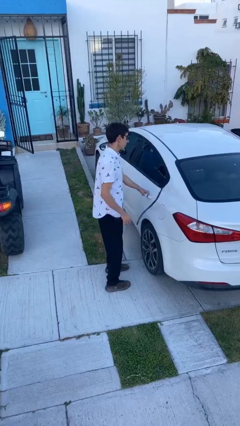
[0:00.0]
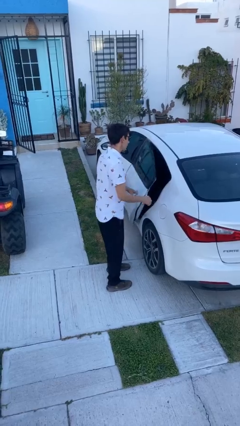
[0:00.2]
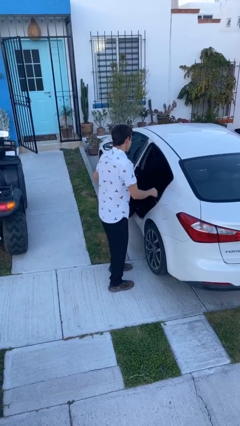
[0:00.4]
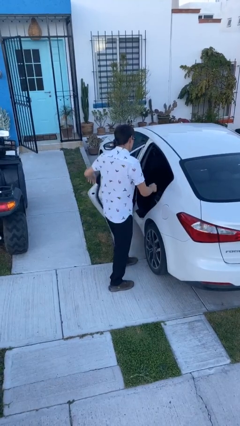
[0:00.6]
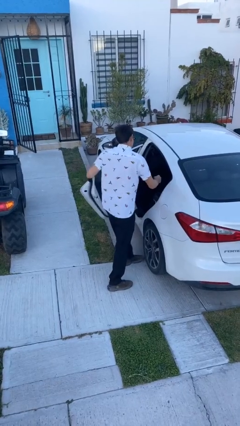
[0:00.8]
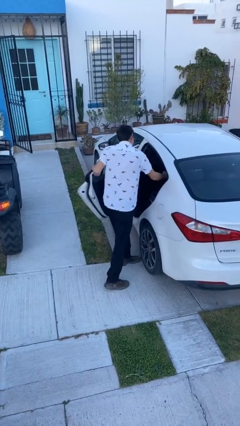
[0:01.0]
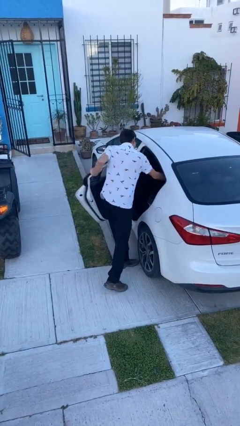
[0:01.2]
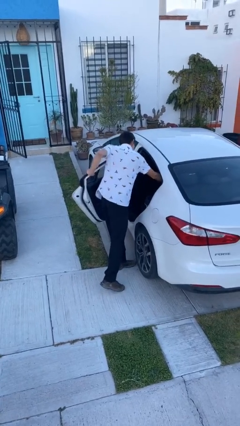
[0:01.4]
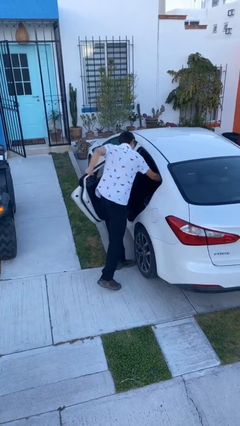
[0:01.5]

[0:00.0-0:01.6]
person opens car door

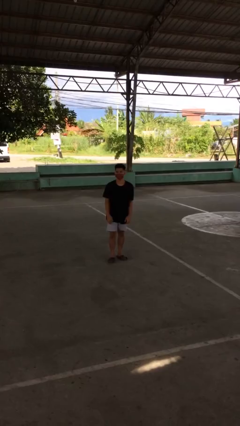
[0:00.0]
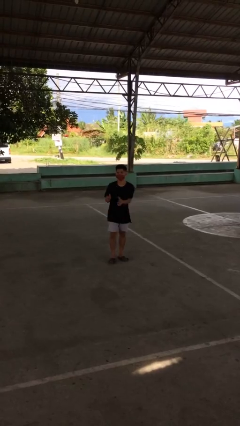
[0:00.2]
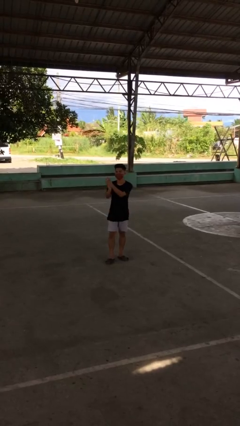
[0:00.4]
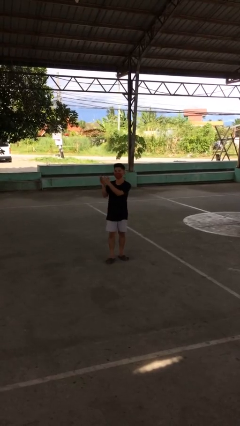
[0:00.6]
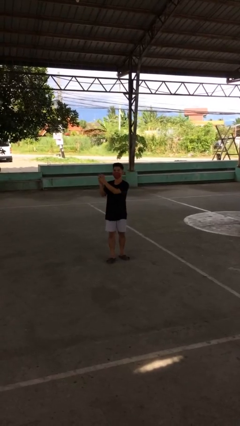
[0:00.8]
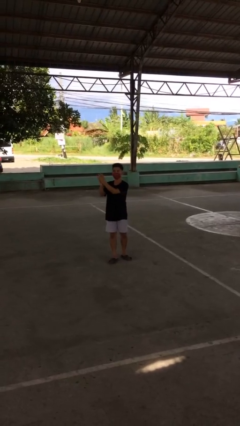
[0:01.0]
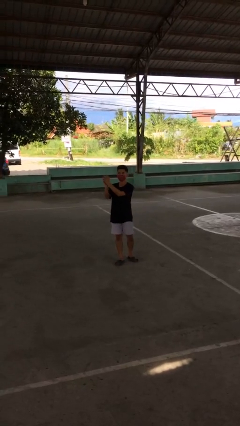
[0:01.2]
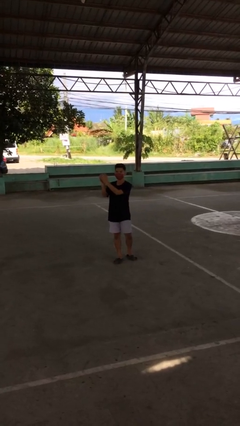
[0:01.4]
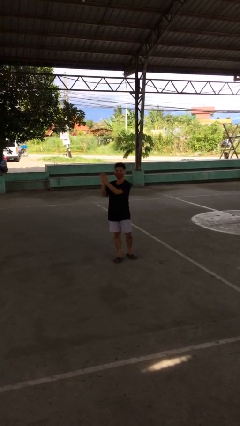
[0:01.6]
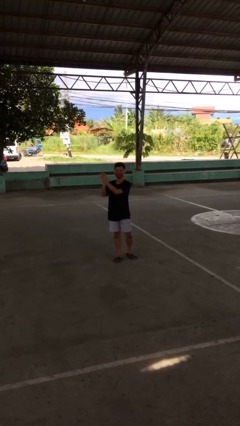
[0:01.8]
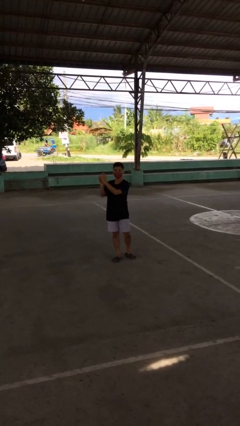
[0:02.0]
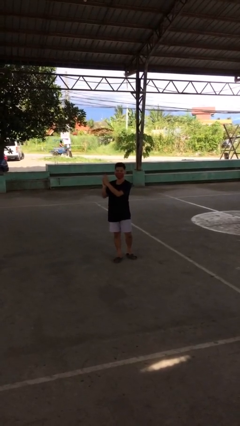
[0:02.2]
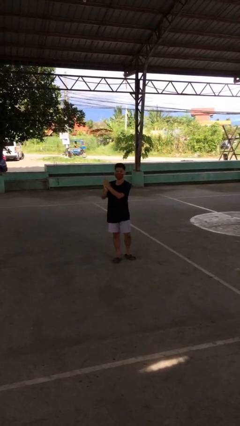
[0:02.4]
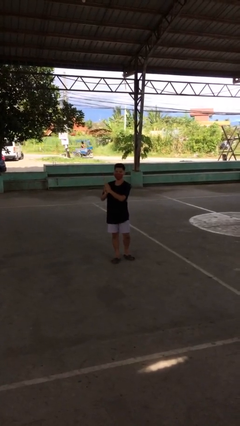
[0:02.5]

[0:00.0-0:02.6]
person claps hands

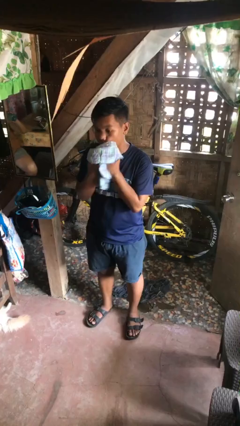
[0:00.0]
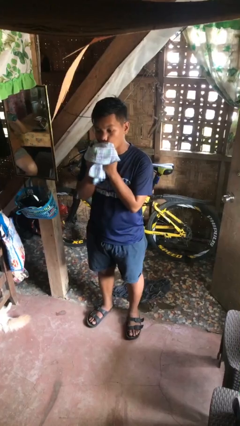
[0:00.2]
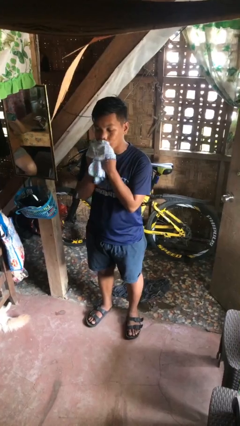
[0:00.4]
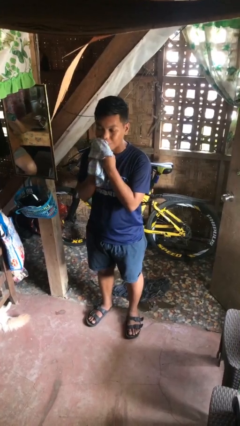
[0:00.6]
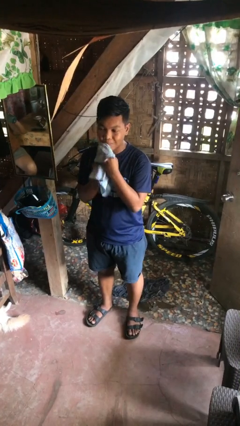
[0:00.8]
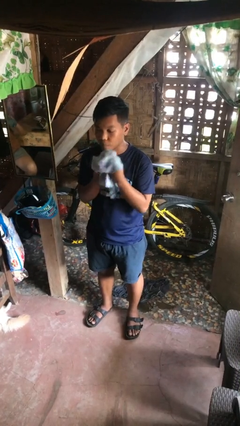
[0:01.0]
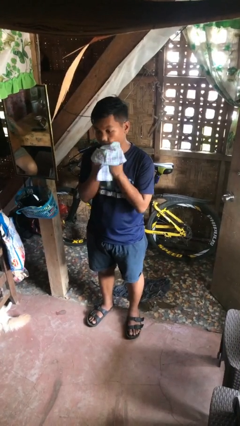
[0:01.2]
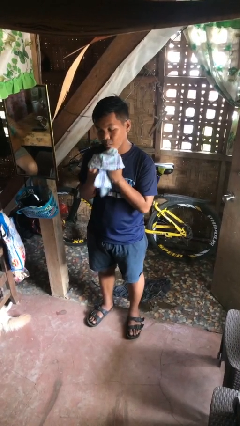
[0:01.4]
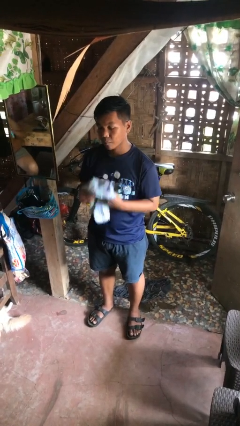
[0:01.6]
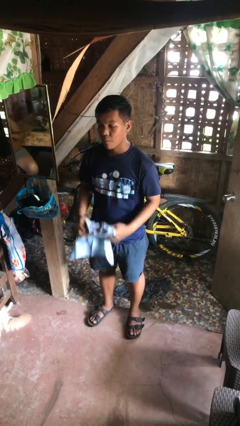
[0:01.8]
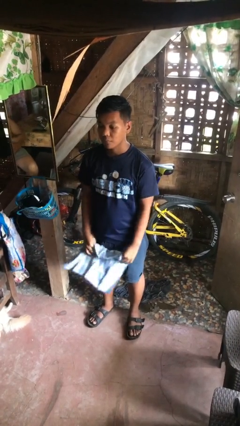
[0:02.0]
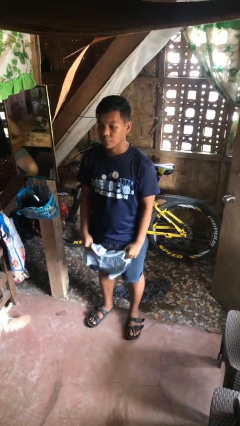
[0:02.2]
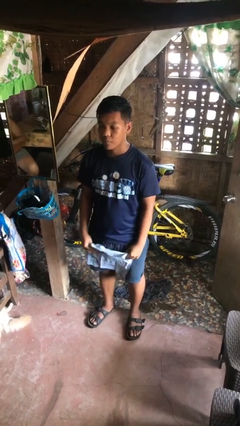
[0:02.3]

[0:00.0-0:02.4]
person wipes mouth with napkin

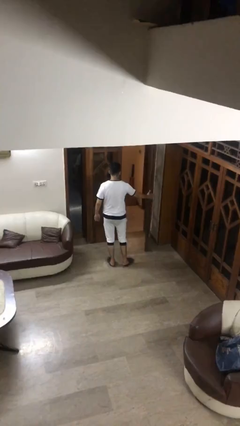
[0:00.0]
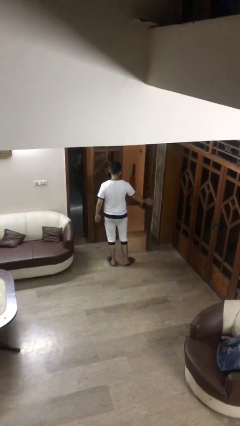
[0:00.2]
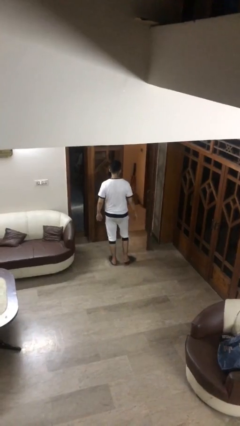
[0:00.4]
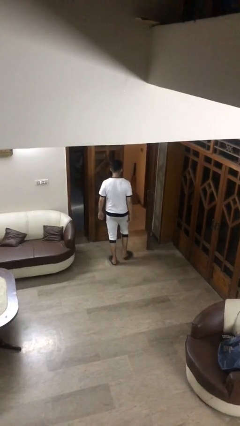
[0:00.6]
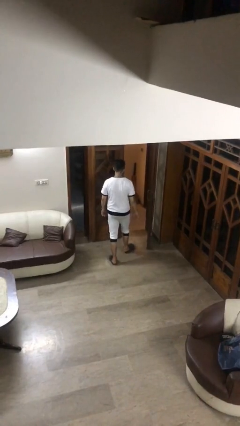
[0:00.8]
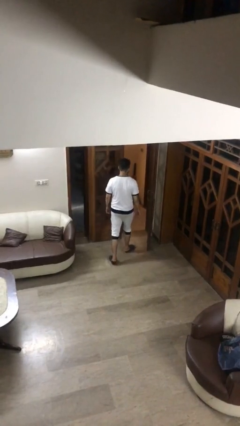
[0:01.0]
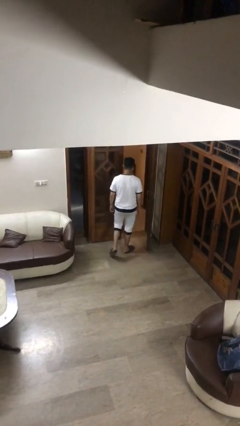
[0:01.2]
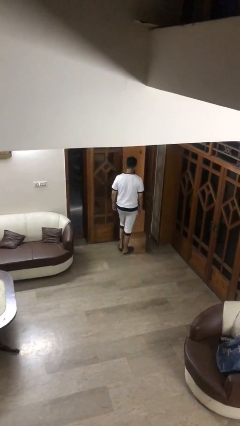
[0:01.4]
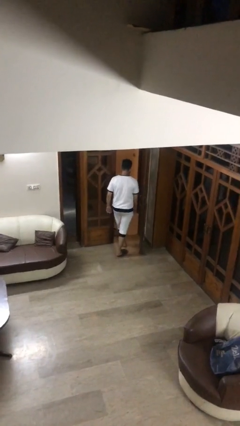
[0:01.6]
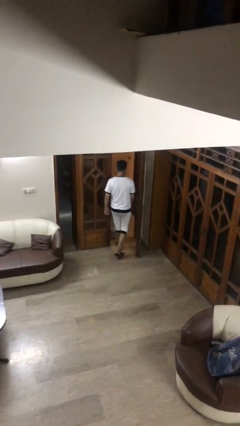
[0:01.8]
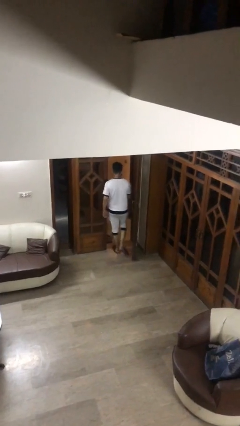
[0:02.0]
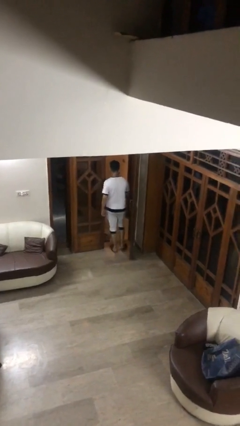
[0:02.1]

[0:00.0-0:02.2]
person exits scene through structure

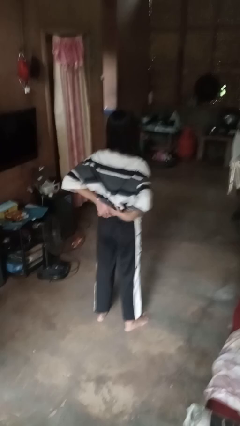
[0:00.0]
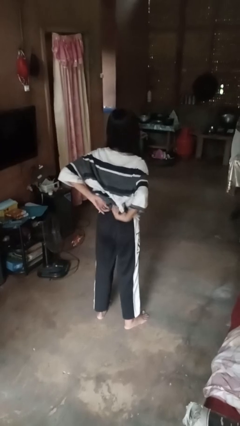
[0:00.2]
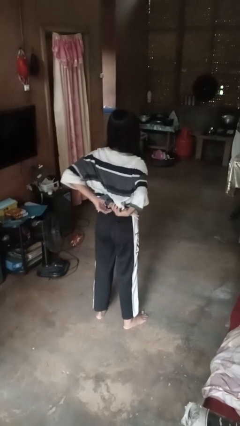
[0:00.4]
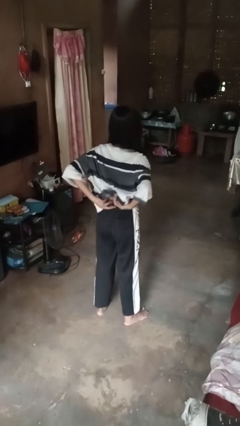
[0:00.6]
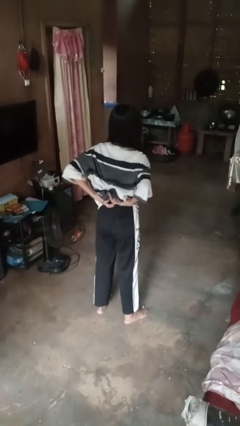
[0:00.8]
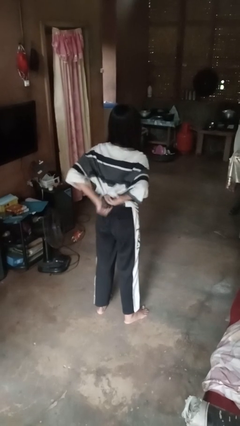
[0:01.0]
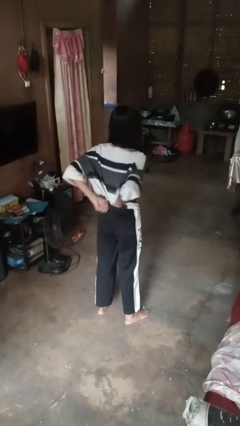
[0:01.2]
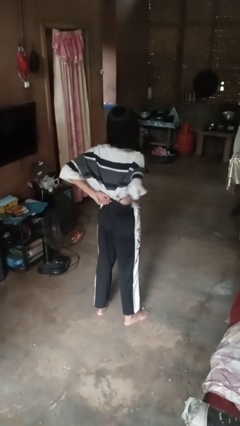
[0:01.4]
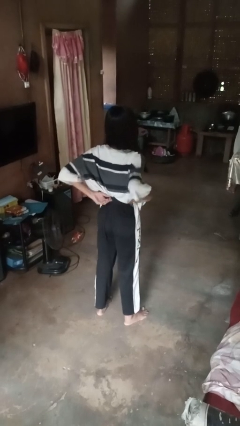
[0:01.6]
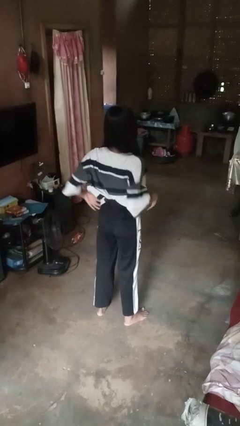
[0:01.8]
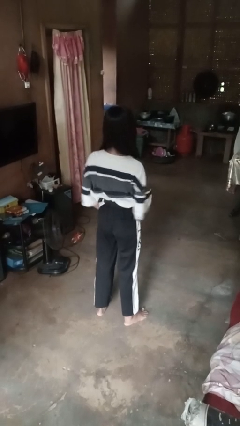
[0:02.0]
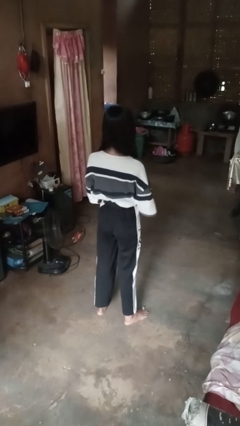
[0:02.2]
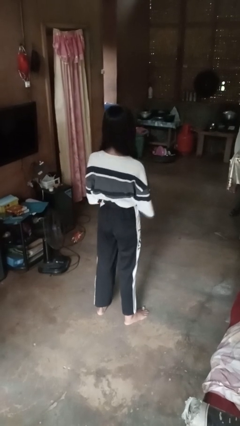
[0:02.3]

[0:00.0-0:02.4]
person tucks in shirt

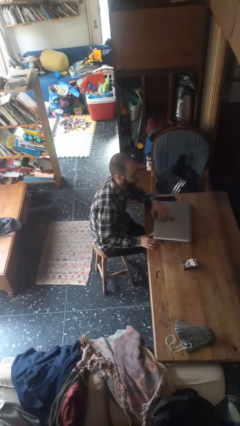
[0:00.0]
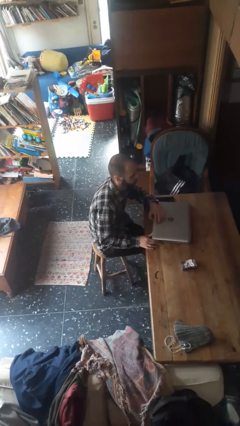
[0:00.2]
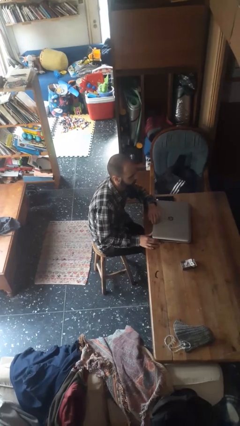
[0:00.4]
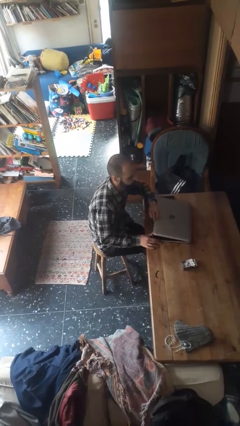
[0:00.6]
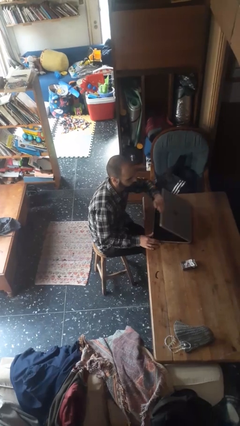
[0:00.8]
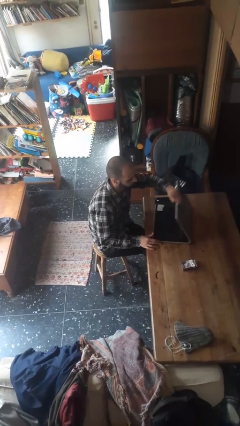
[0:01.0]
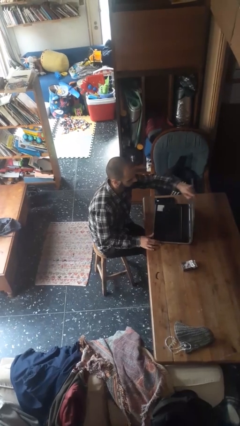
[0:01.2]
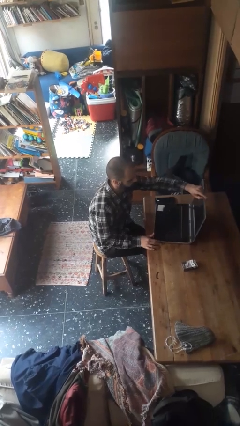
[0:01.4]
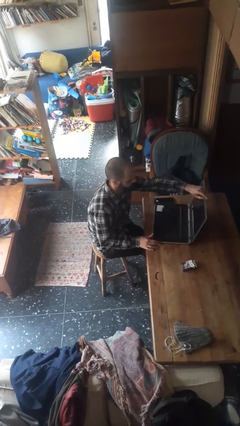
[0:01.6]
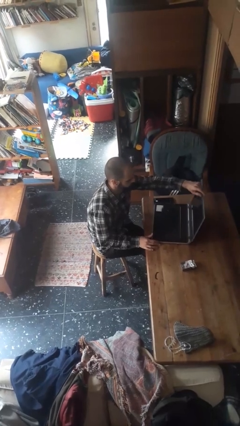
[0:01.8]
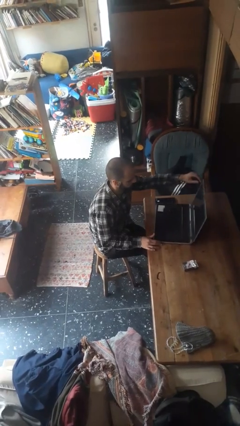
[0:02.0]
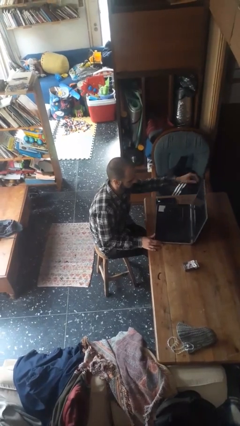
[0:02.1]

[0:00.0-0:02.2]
person opens laptop

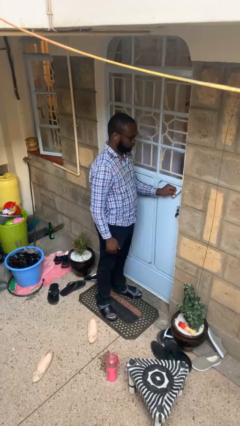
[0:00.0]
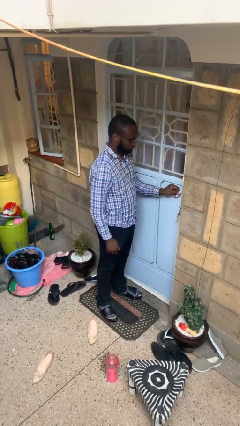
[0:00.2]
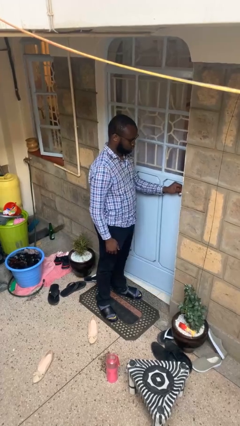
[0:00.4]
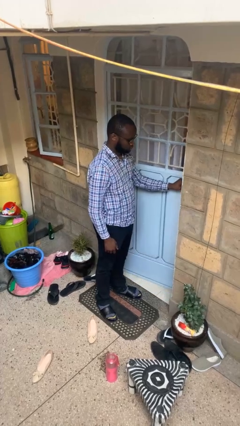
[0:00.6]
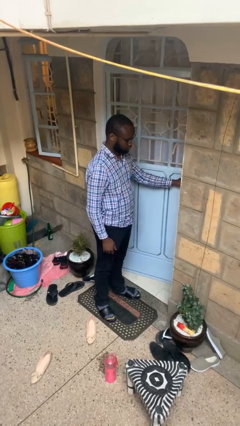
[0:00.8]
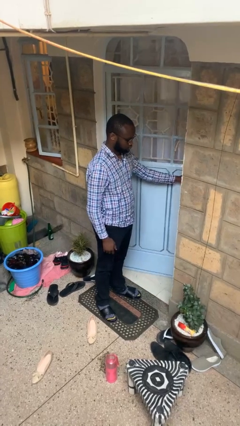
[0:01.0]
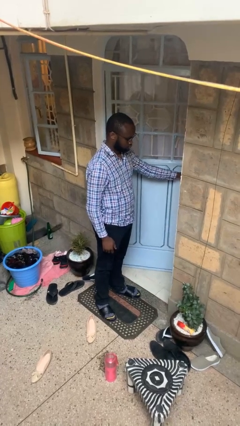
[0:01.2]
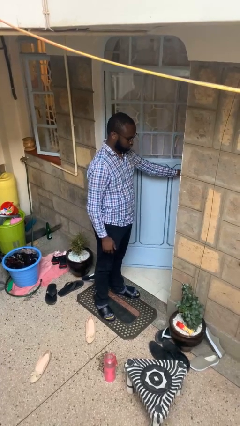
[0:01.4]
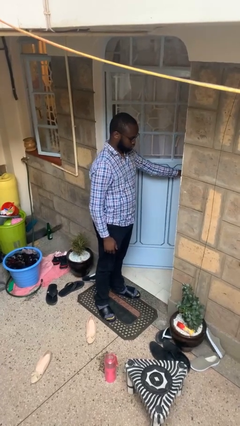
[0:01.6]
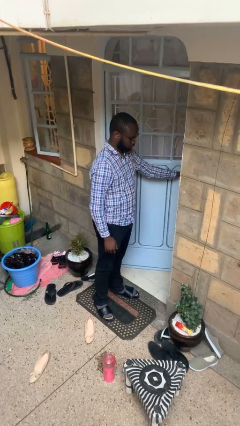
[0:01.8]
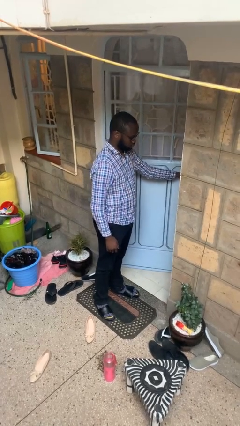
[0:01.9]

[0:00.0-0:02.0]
person opens facility door

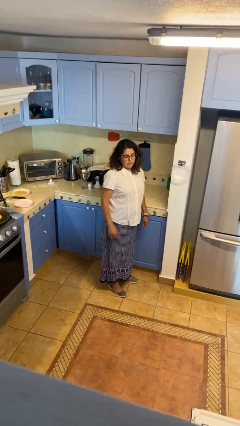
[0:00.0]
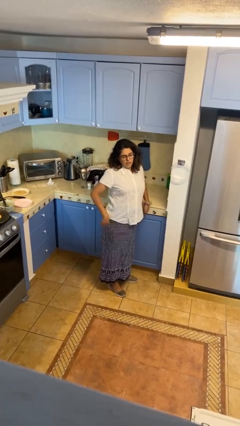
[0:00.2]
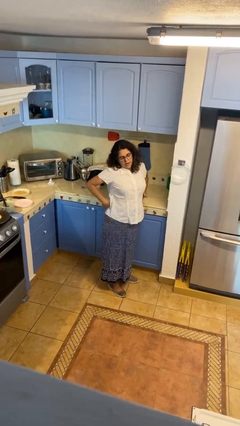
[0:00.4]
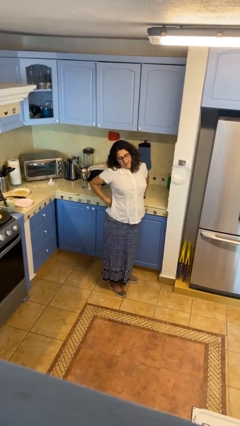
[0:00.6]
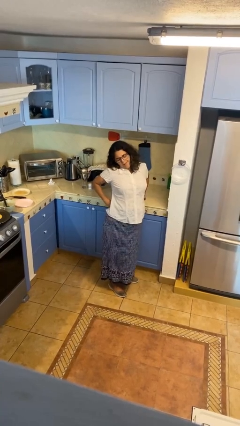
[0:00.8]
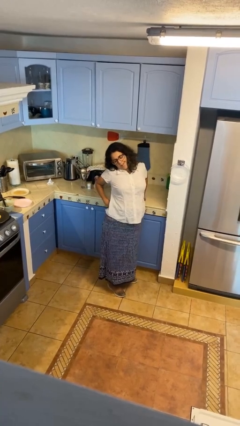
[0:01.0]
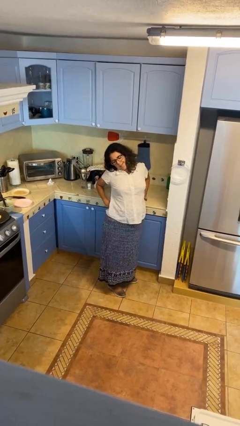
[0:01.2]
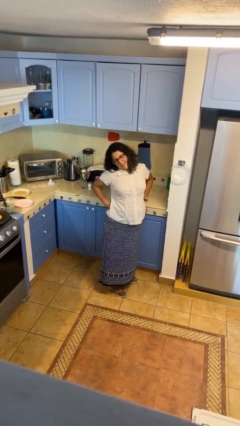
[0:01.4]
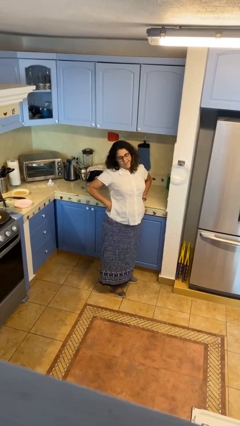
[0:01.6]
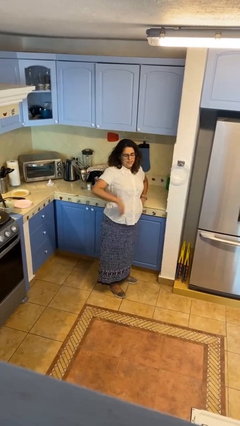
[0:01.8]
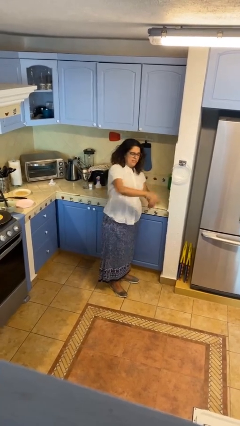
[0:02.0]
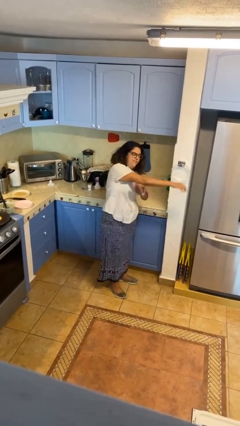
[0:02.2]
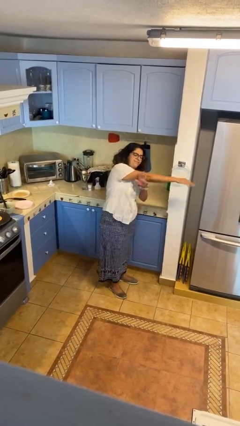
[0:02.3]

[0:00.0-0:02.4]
person stretches back
